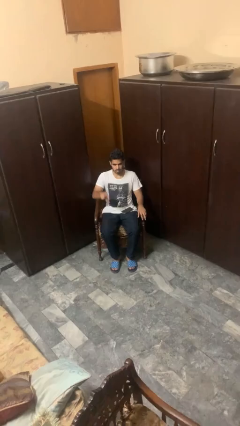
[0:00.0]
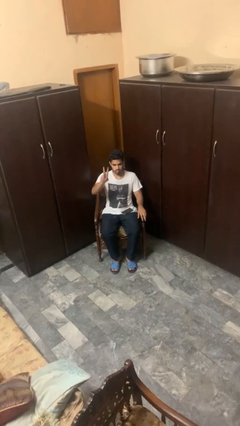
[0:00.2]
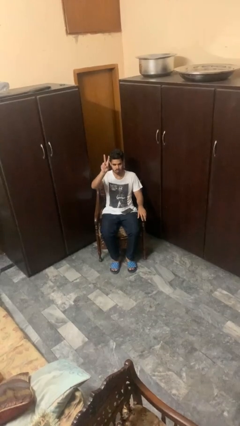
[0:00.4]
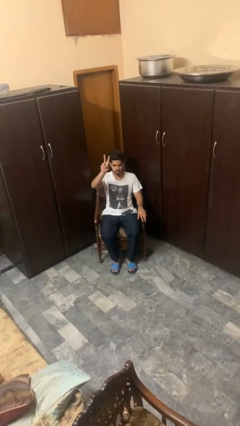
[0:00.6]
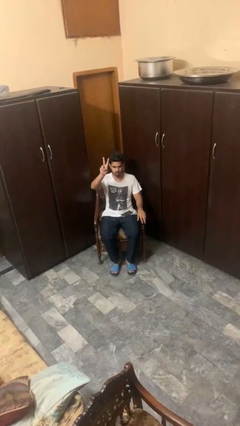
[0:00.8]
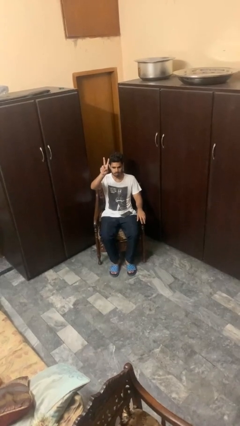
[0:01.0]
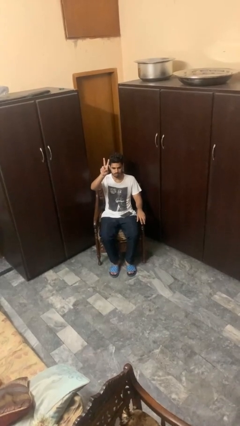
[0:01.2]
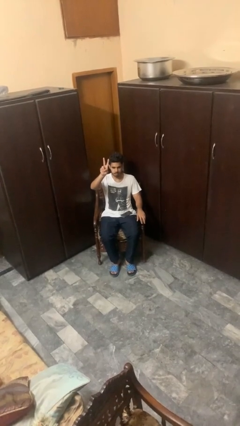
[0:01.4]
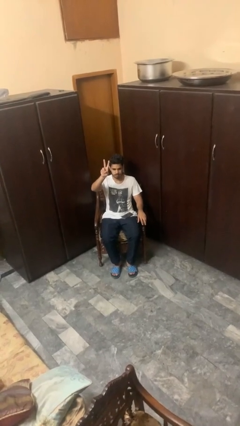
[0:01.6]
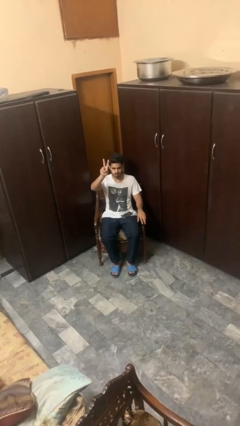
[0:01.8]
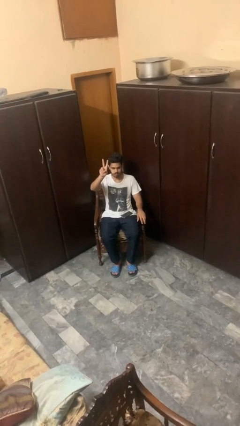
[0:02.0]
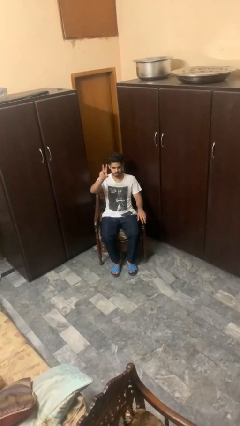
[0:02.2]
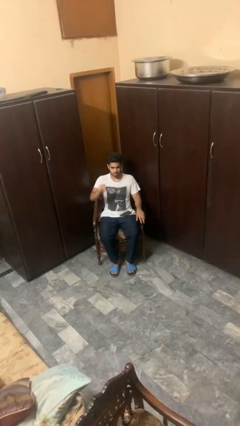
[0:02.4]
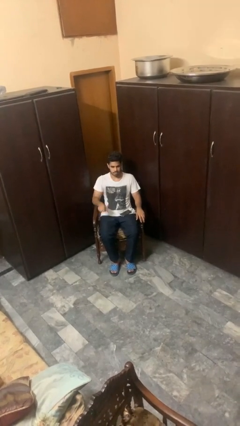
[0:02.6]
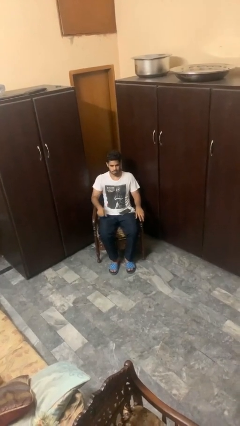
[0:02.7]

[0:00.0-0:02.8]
person gestures peace

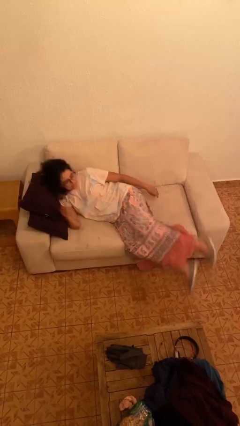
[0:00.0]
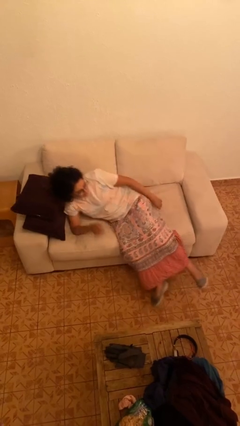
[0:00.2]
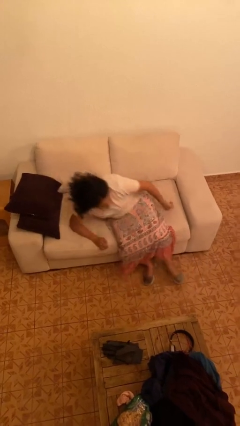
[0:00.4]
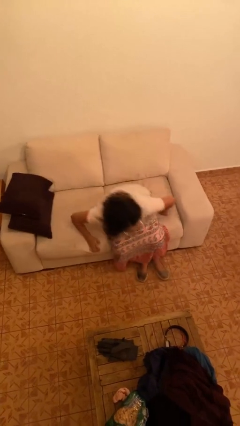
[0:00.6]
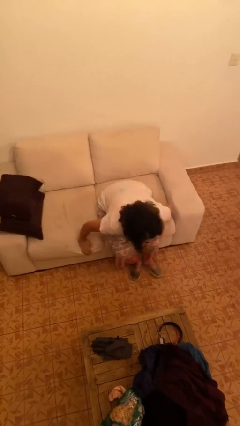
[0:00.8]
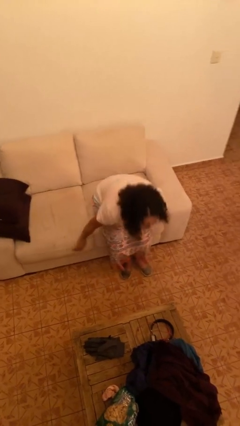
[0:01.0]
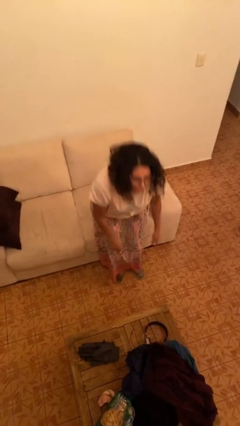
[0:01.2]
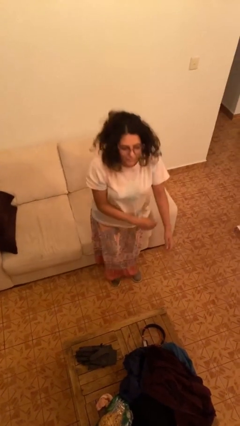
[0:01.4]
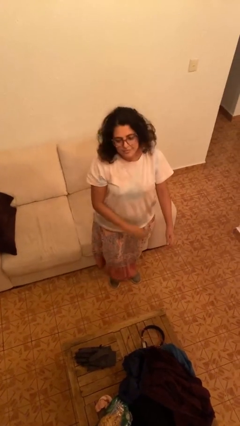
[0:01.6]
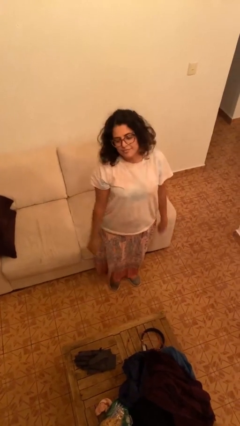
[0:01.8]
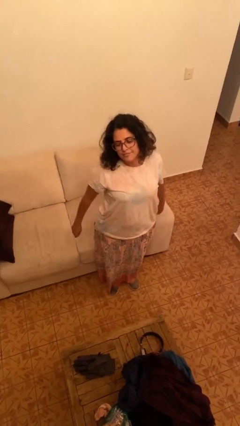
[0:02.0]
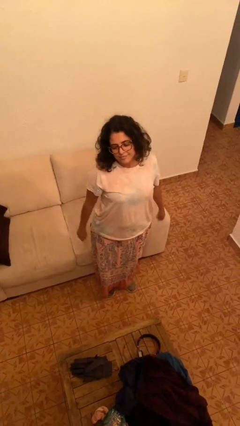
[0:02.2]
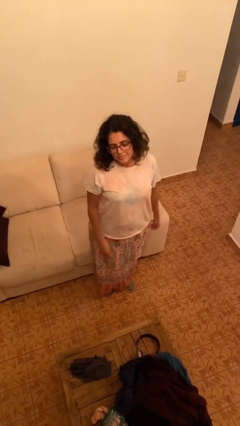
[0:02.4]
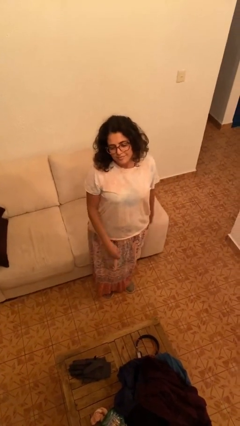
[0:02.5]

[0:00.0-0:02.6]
person stands up

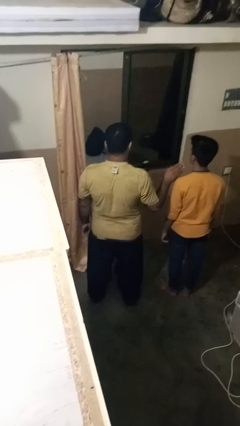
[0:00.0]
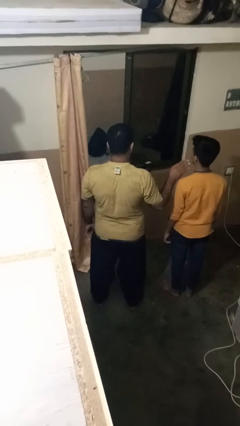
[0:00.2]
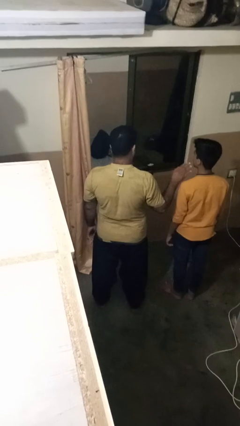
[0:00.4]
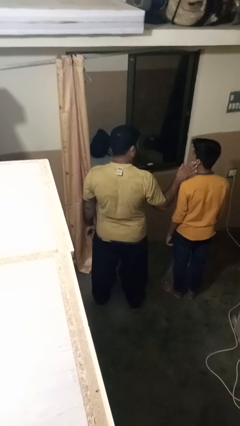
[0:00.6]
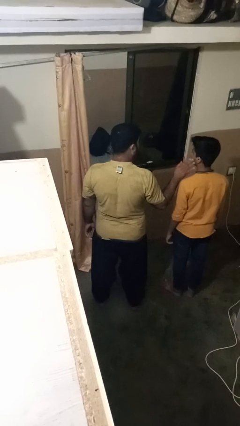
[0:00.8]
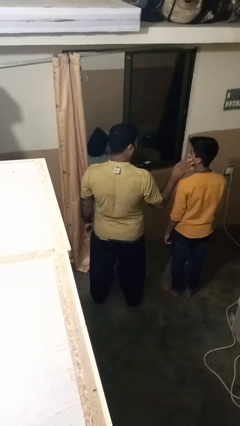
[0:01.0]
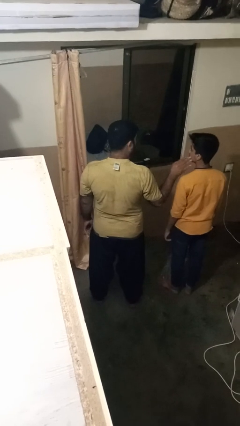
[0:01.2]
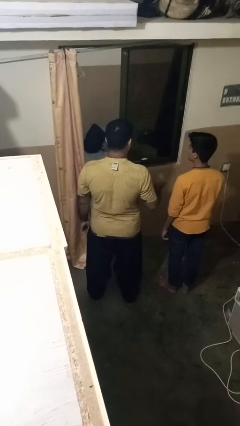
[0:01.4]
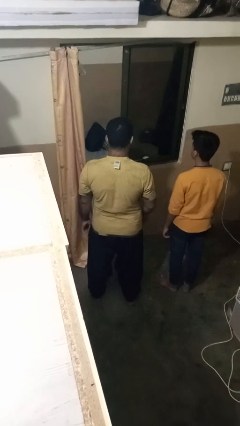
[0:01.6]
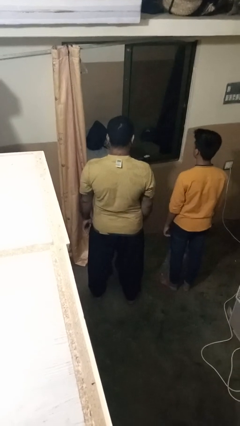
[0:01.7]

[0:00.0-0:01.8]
person touches face of person

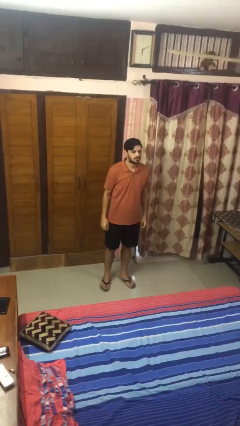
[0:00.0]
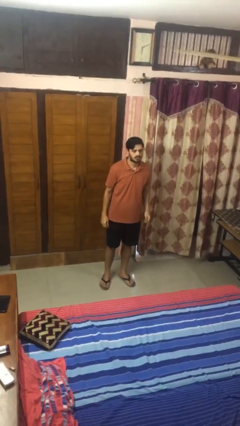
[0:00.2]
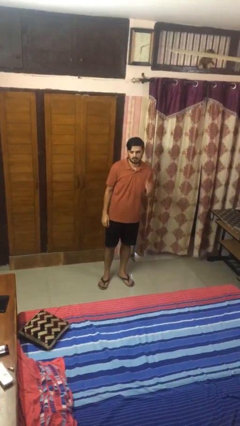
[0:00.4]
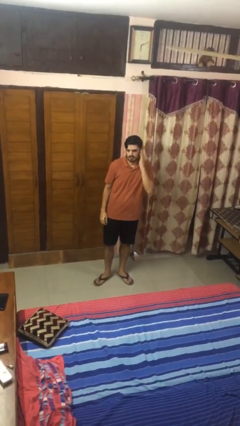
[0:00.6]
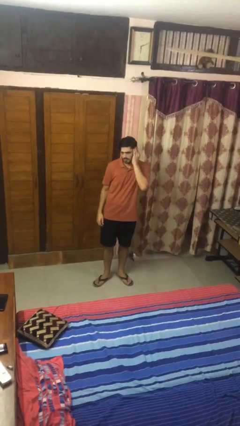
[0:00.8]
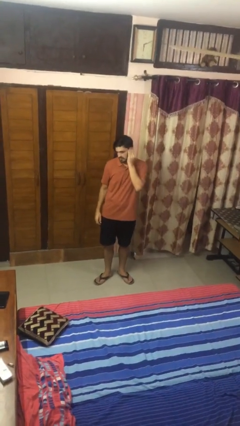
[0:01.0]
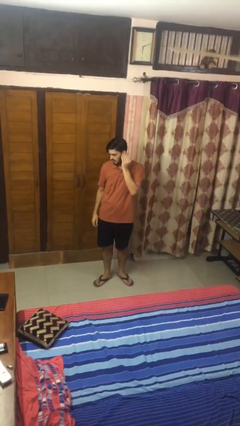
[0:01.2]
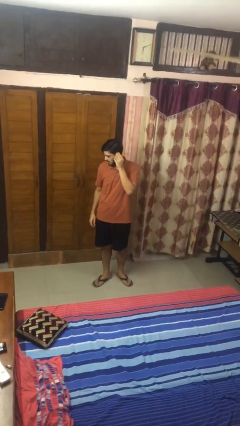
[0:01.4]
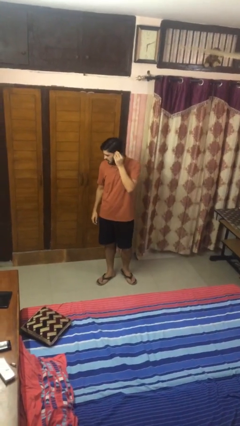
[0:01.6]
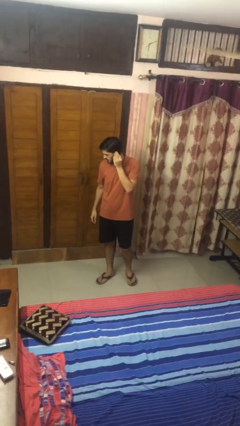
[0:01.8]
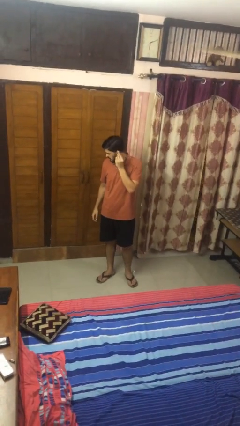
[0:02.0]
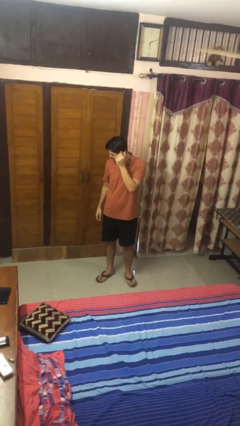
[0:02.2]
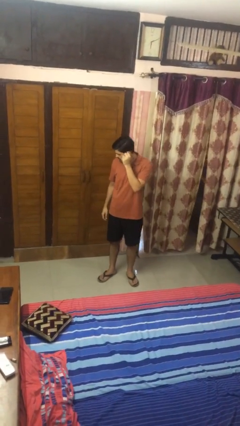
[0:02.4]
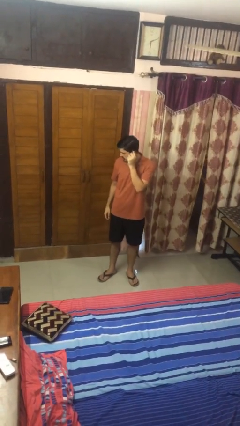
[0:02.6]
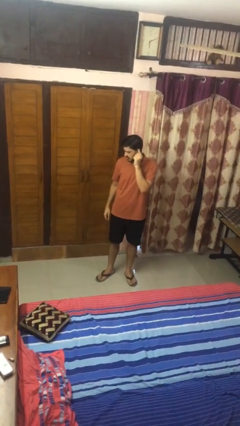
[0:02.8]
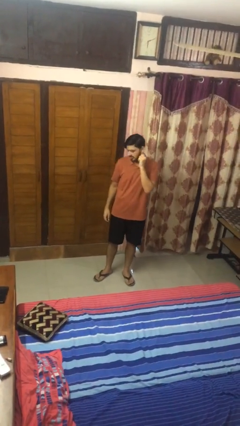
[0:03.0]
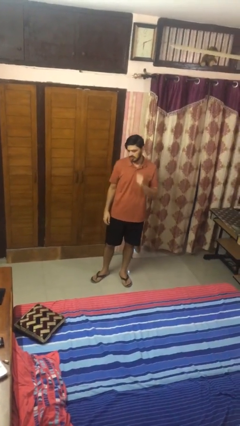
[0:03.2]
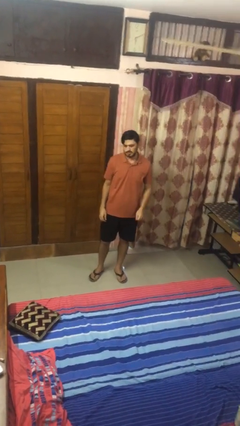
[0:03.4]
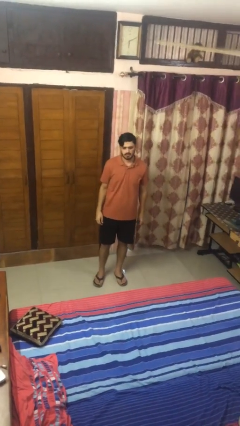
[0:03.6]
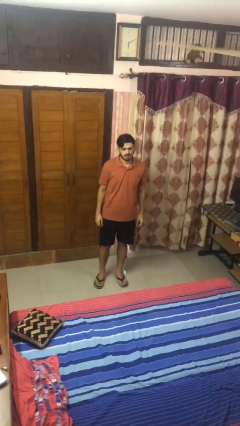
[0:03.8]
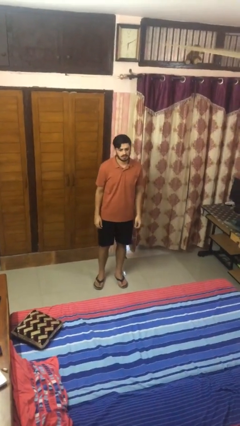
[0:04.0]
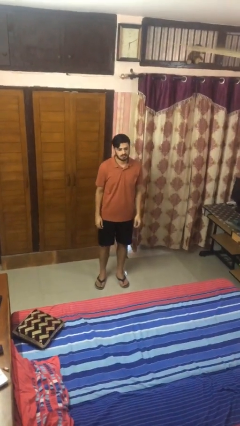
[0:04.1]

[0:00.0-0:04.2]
person touches earlobe

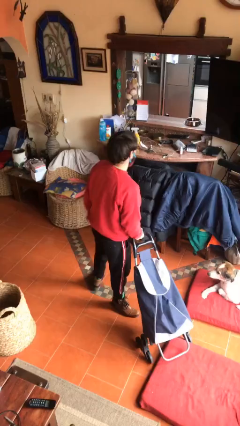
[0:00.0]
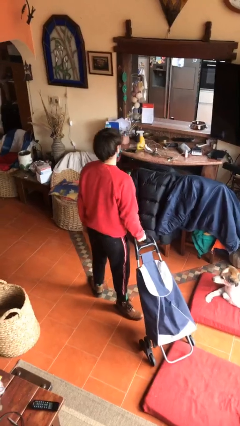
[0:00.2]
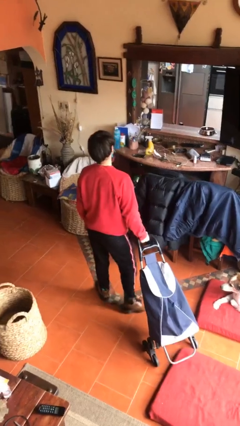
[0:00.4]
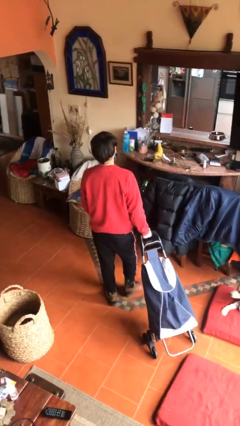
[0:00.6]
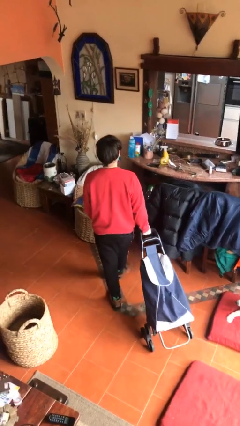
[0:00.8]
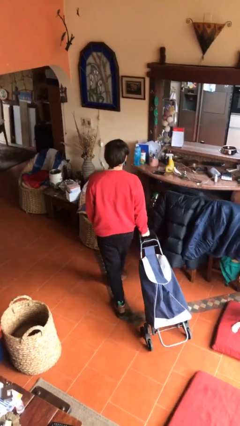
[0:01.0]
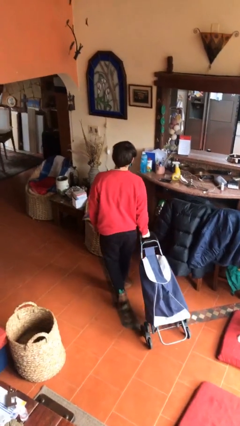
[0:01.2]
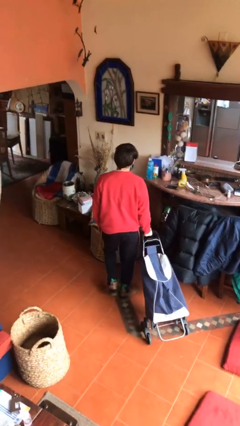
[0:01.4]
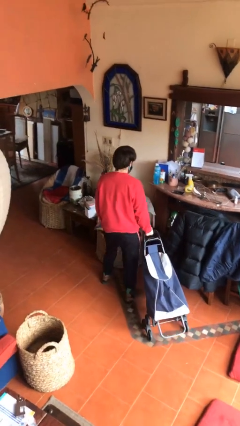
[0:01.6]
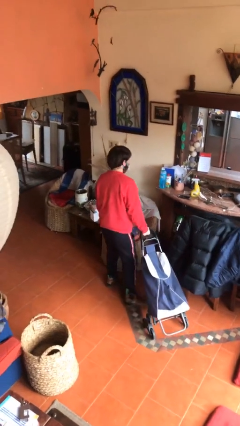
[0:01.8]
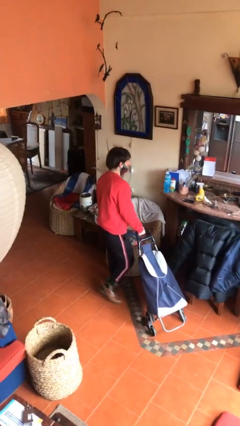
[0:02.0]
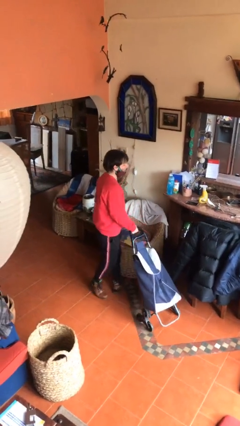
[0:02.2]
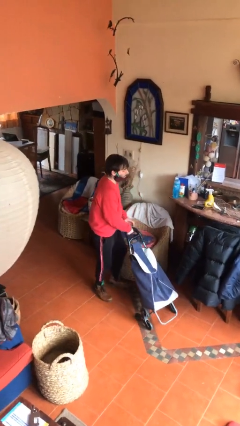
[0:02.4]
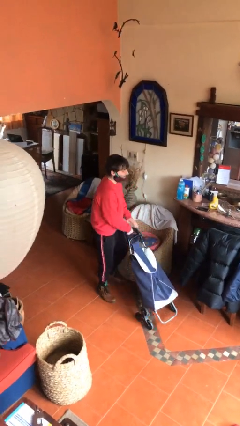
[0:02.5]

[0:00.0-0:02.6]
person pulls wheeled cart

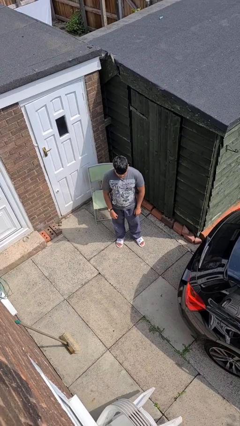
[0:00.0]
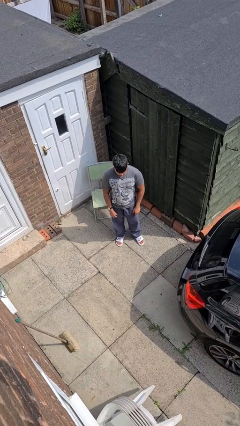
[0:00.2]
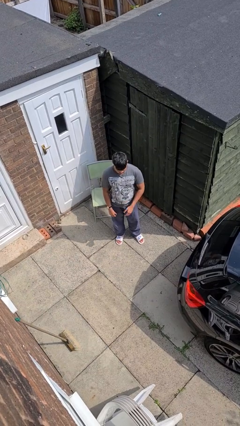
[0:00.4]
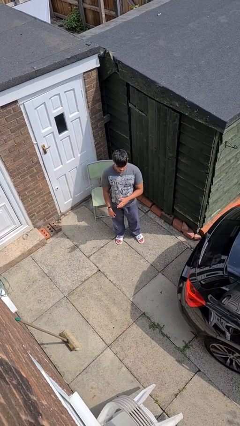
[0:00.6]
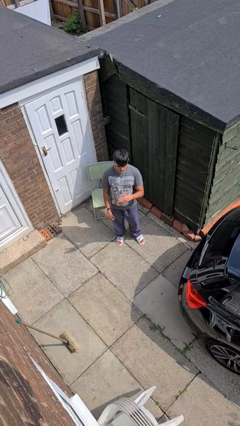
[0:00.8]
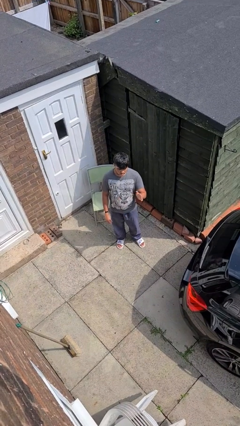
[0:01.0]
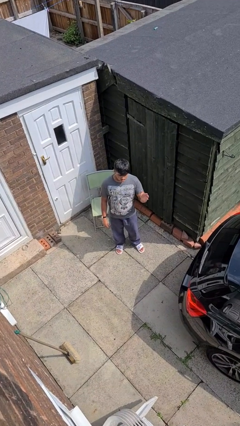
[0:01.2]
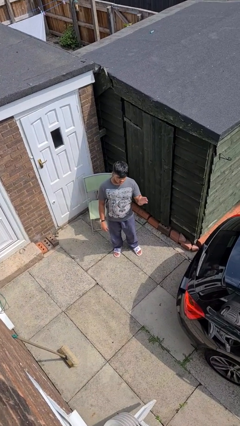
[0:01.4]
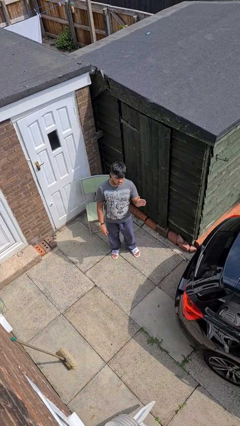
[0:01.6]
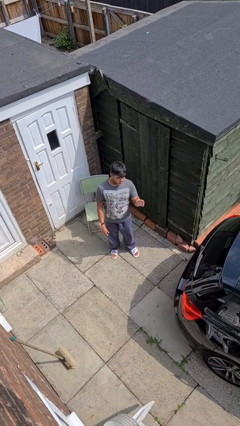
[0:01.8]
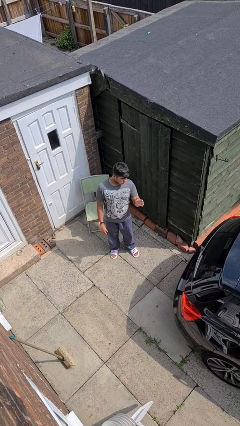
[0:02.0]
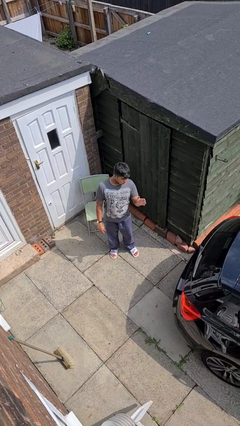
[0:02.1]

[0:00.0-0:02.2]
person gestures swipe left

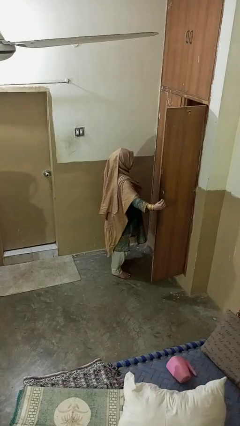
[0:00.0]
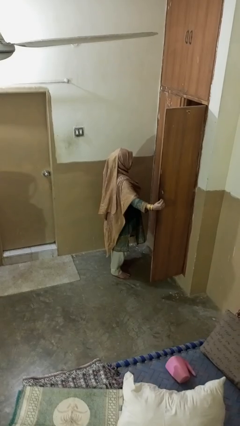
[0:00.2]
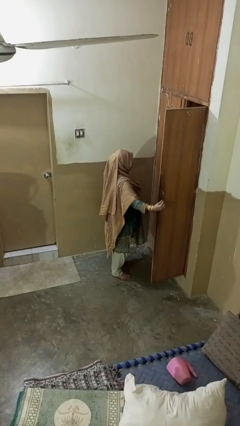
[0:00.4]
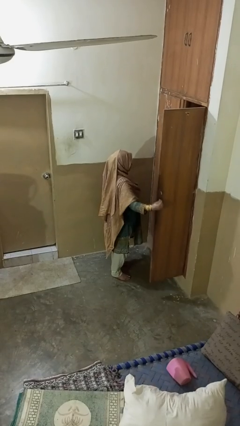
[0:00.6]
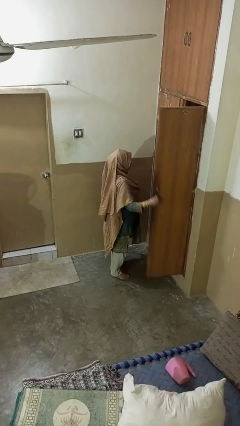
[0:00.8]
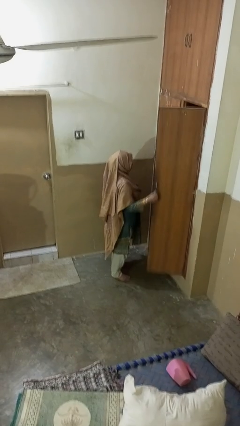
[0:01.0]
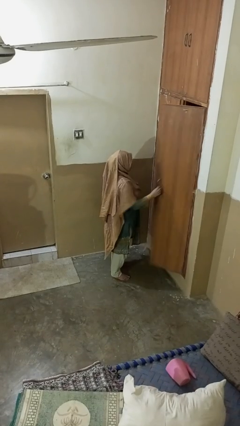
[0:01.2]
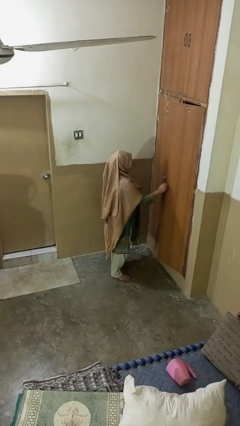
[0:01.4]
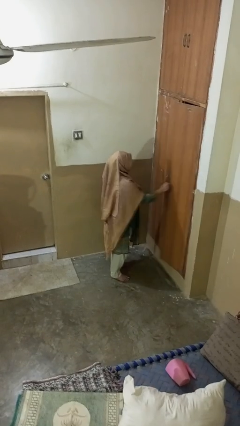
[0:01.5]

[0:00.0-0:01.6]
person closes closet door
